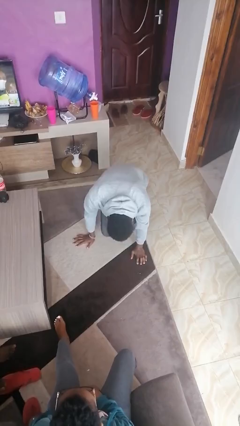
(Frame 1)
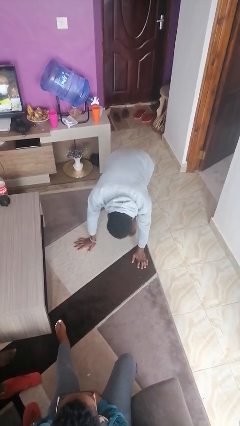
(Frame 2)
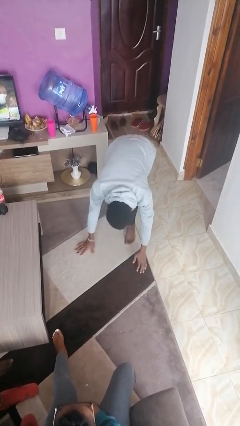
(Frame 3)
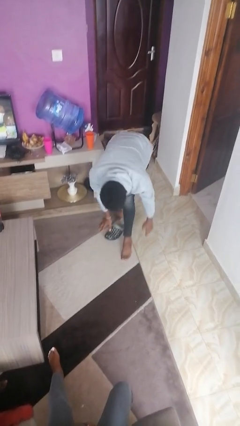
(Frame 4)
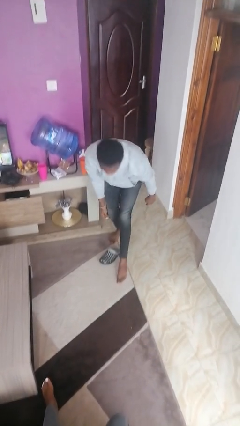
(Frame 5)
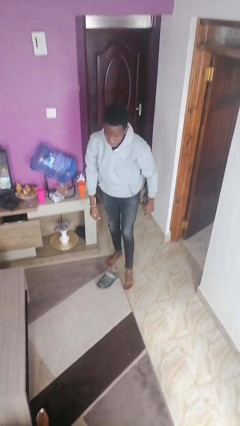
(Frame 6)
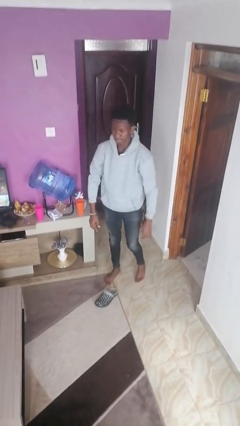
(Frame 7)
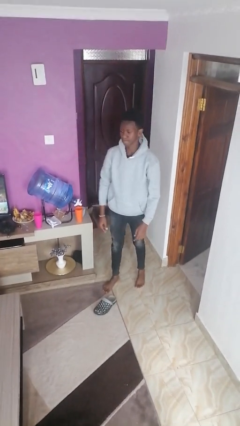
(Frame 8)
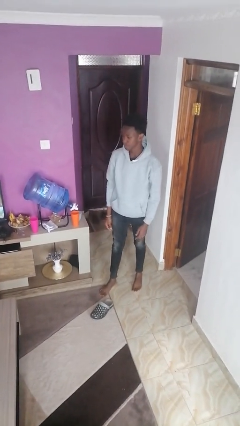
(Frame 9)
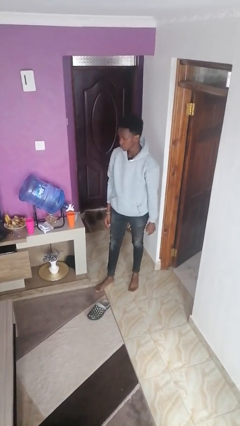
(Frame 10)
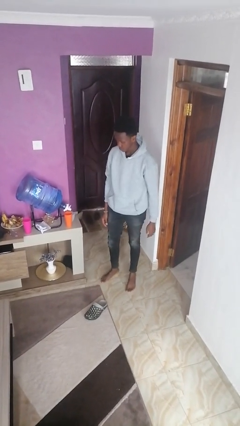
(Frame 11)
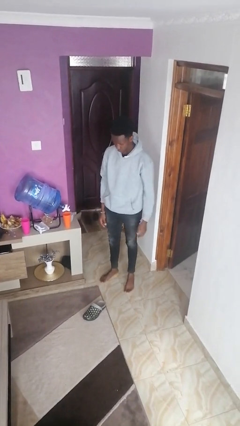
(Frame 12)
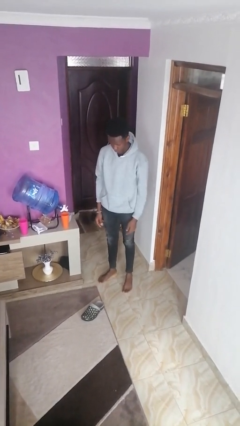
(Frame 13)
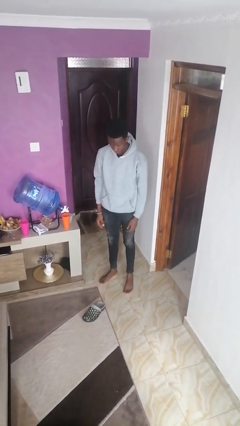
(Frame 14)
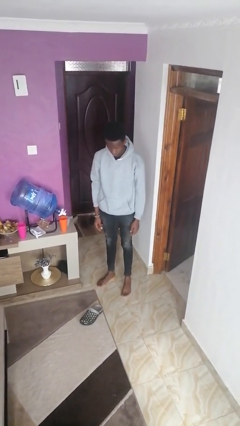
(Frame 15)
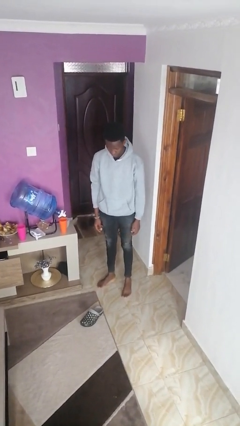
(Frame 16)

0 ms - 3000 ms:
person stands up from floor

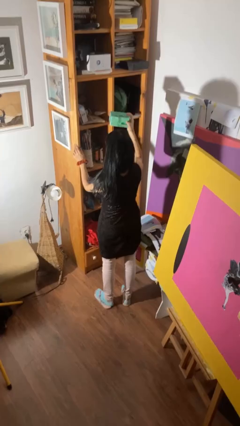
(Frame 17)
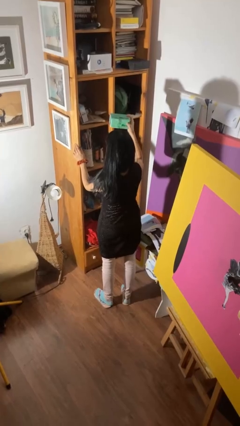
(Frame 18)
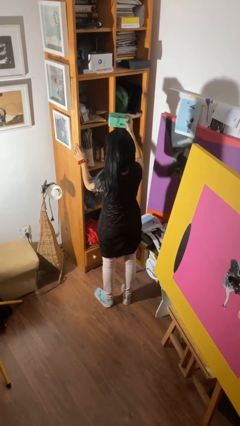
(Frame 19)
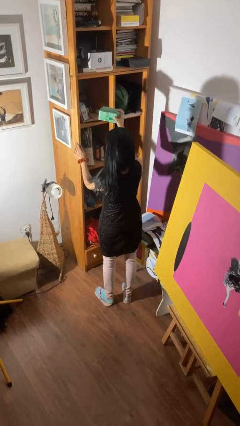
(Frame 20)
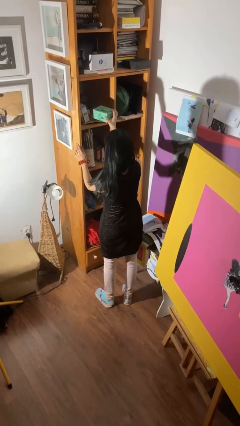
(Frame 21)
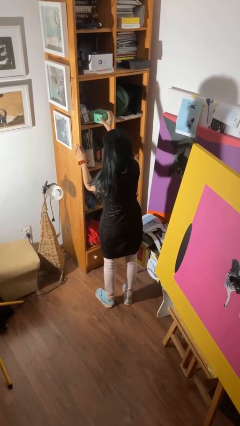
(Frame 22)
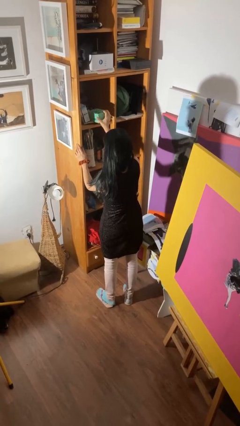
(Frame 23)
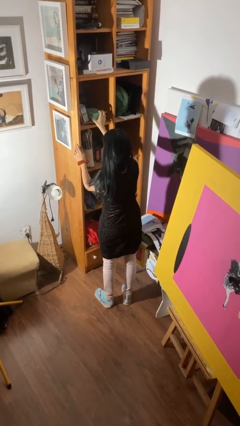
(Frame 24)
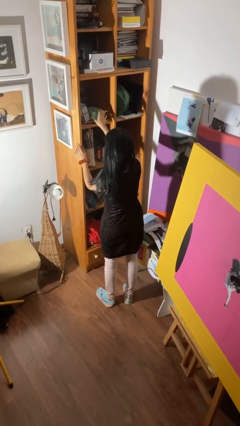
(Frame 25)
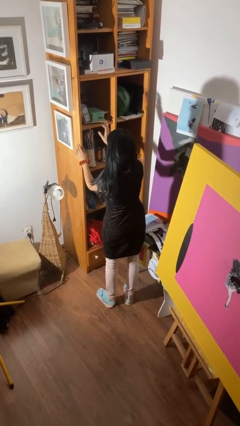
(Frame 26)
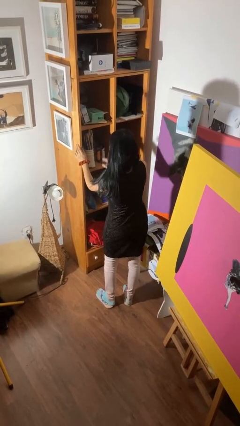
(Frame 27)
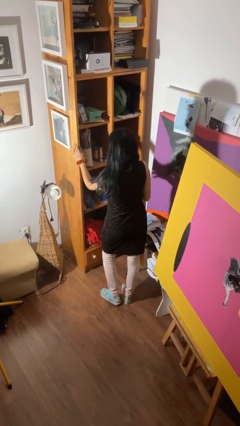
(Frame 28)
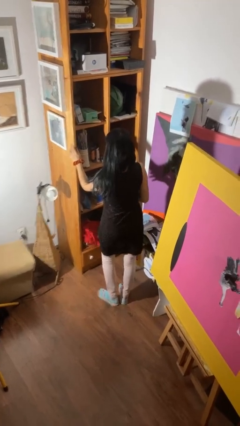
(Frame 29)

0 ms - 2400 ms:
person puts down object on shelf

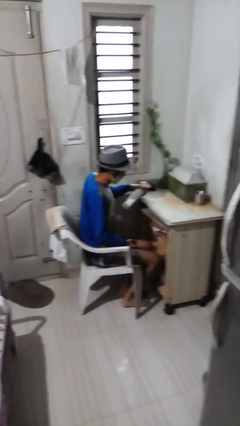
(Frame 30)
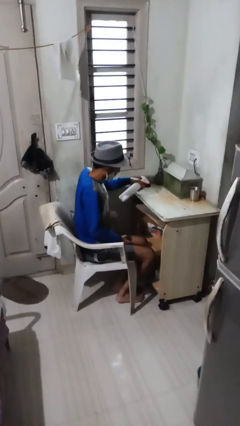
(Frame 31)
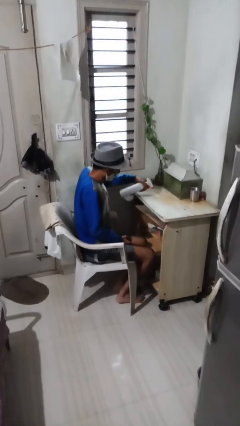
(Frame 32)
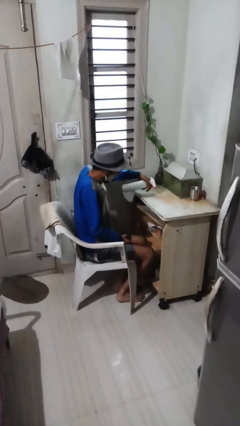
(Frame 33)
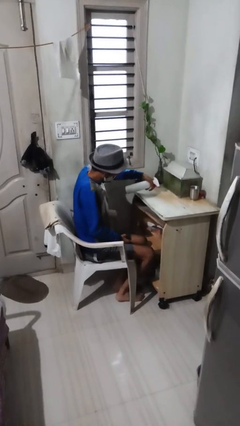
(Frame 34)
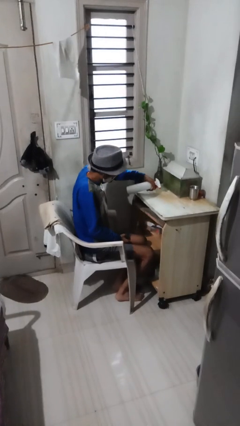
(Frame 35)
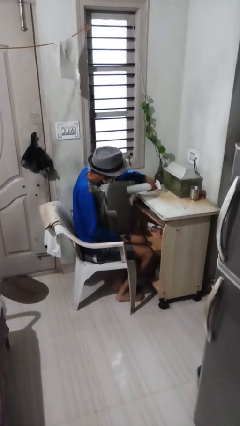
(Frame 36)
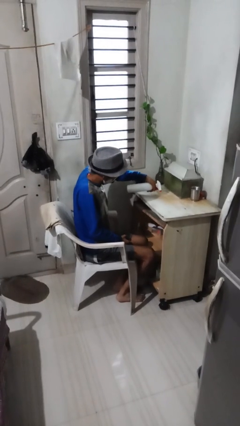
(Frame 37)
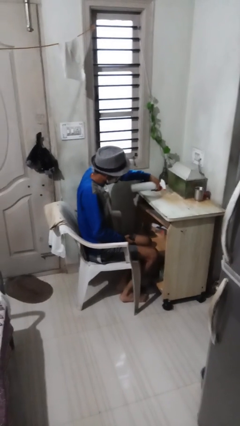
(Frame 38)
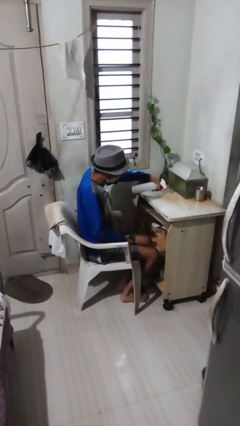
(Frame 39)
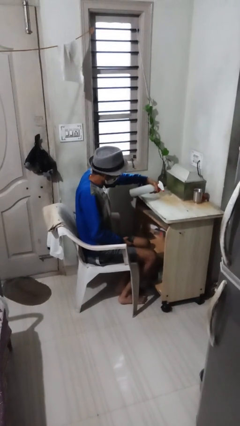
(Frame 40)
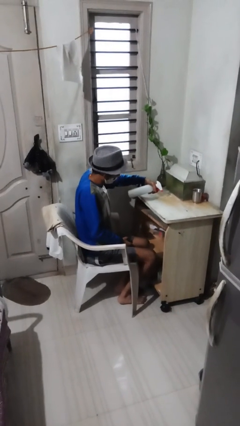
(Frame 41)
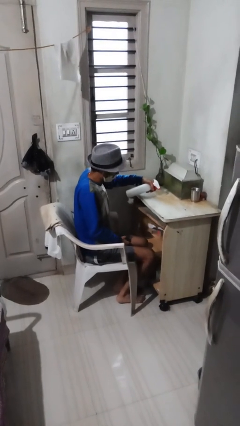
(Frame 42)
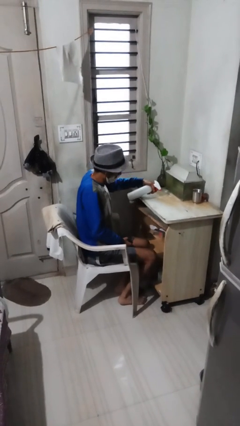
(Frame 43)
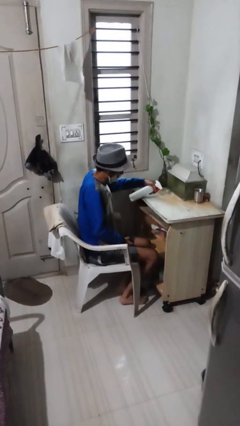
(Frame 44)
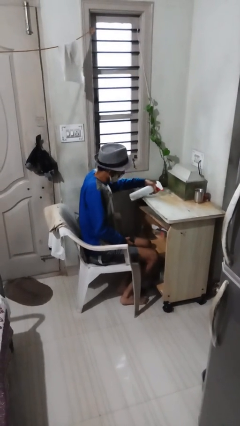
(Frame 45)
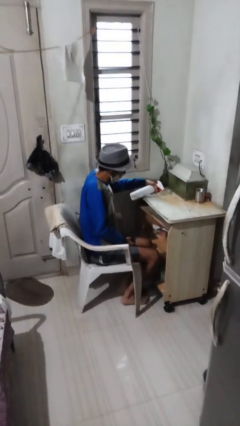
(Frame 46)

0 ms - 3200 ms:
person sprays from bottle

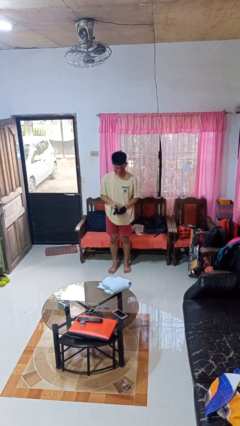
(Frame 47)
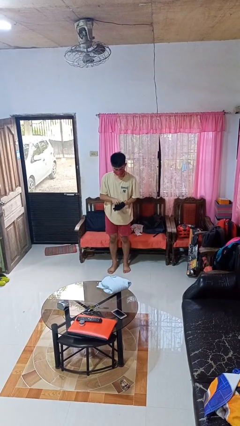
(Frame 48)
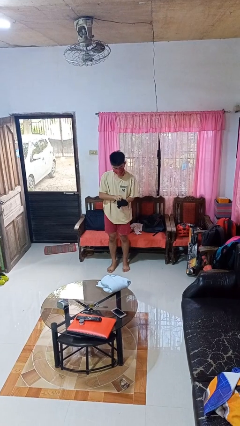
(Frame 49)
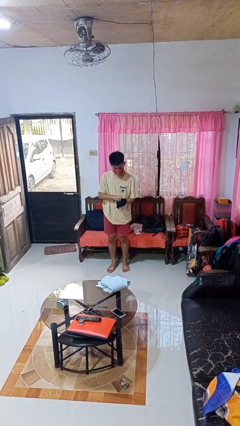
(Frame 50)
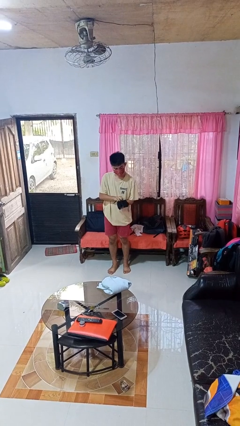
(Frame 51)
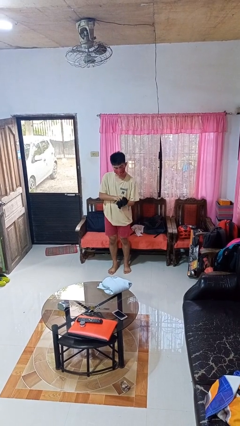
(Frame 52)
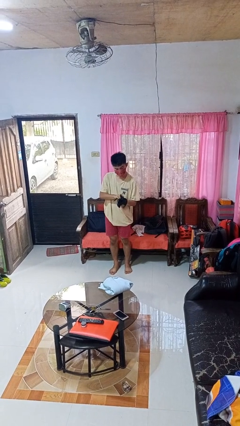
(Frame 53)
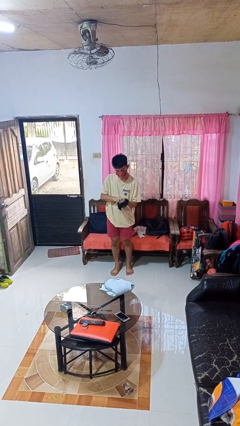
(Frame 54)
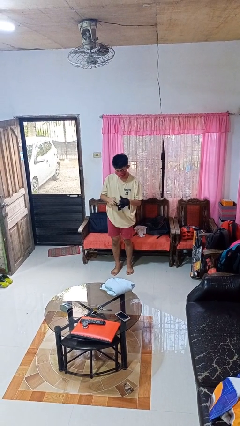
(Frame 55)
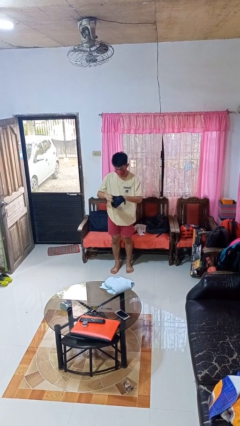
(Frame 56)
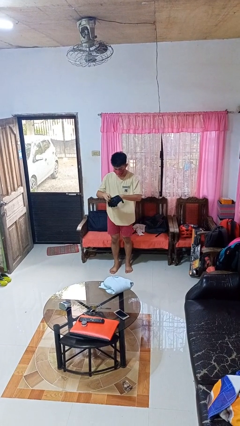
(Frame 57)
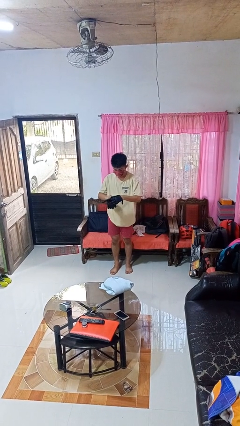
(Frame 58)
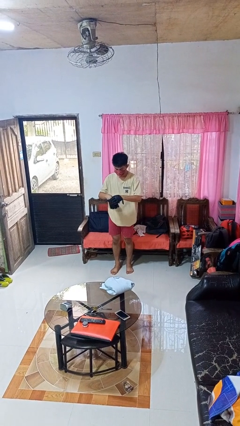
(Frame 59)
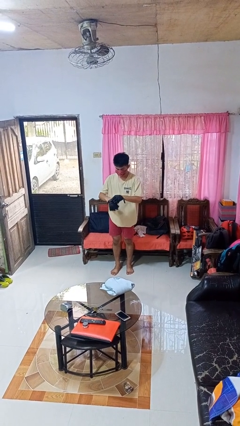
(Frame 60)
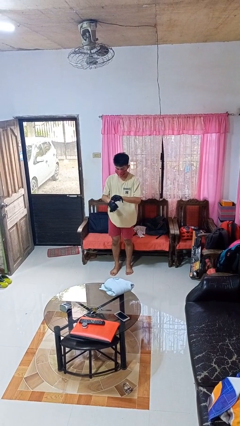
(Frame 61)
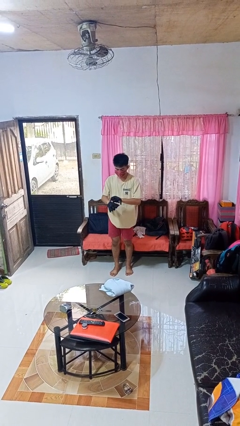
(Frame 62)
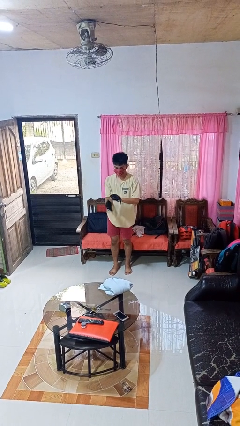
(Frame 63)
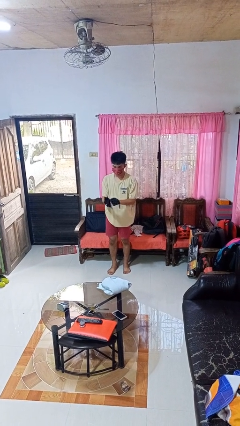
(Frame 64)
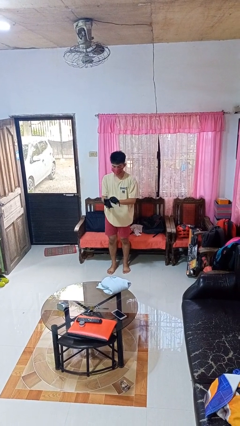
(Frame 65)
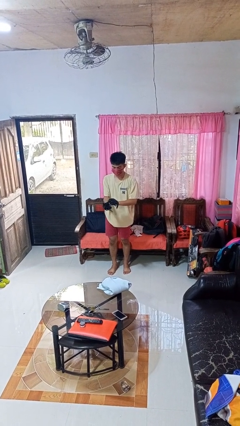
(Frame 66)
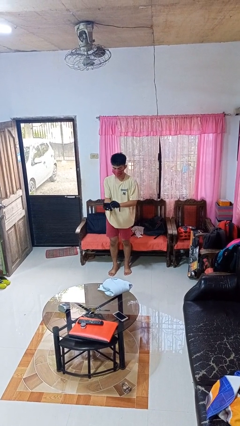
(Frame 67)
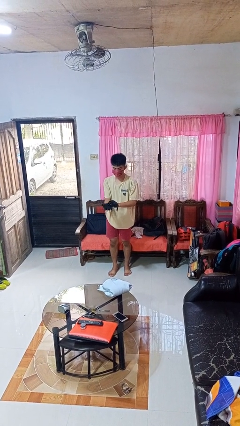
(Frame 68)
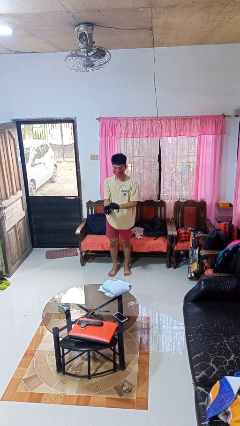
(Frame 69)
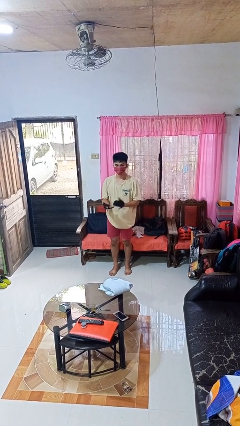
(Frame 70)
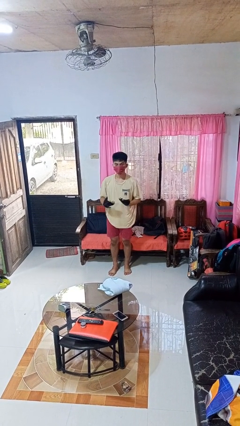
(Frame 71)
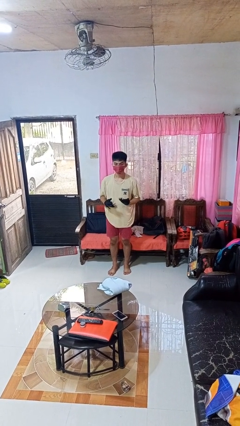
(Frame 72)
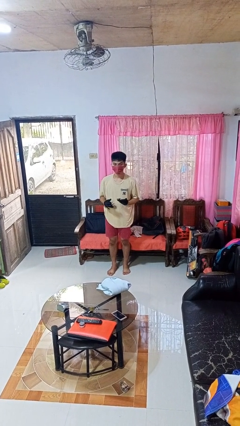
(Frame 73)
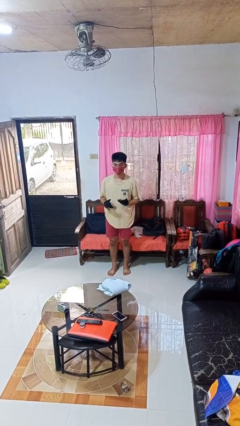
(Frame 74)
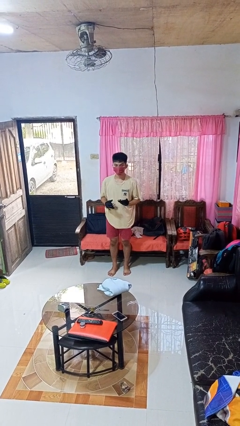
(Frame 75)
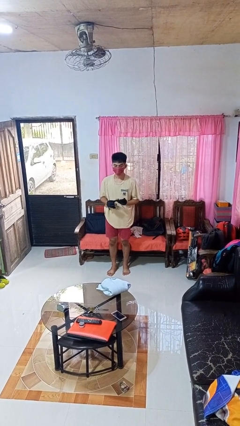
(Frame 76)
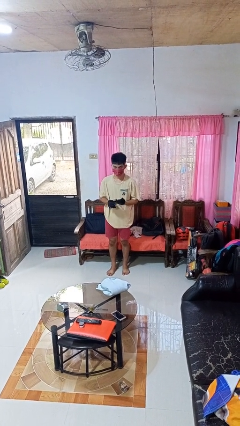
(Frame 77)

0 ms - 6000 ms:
person puts on gloves

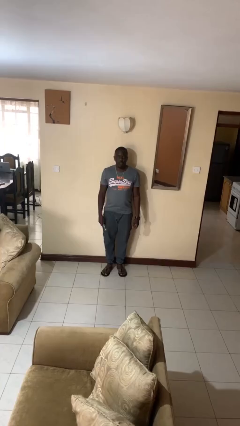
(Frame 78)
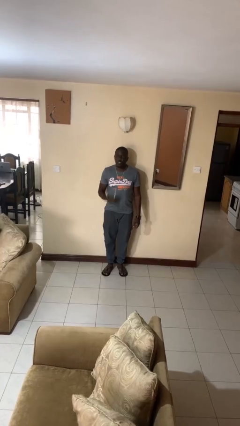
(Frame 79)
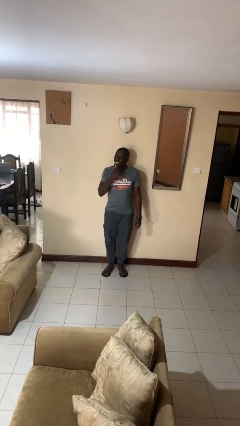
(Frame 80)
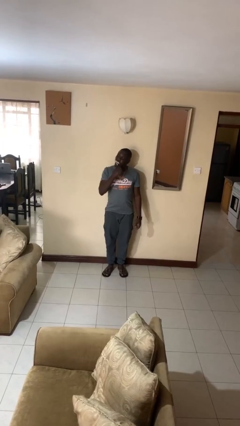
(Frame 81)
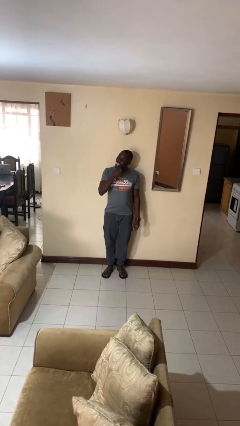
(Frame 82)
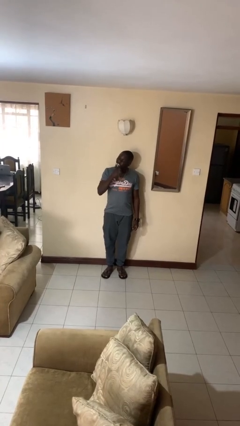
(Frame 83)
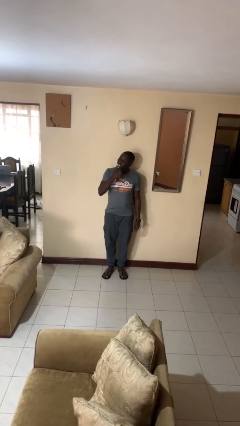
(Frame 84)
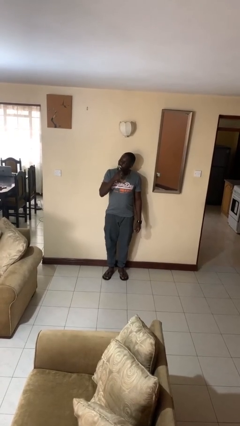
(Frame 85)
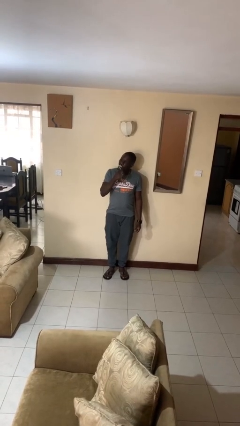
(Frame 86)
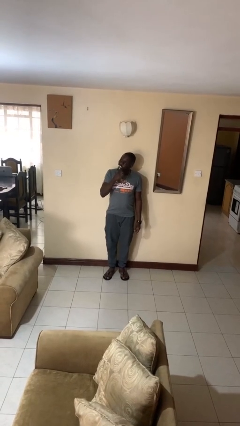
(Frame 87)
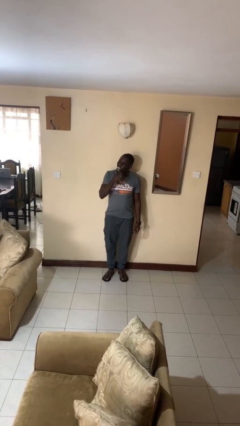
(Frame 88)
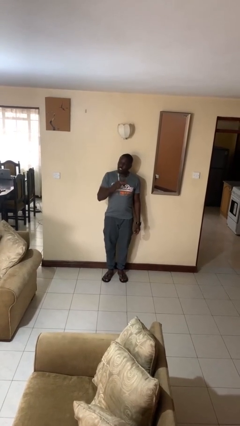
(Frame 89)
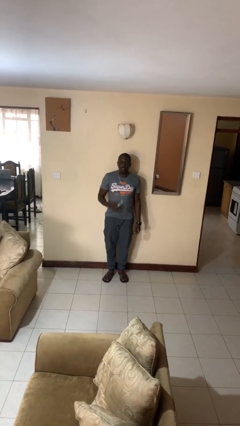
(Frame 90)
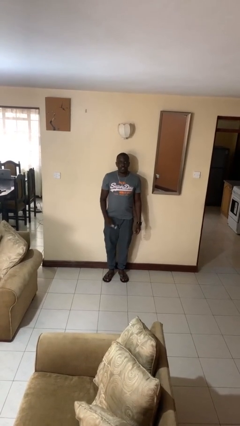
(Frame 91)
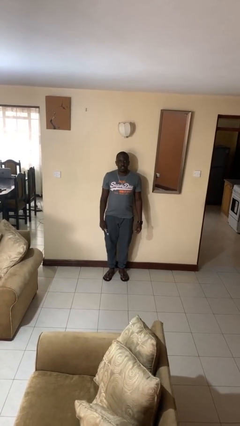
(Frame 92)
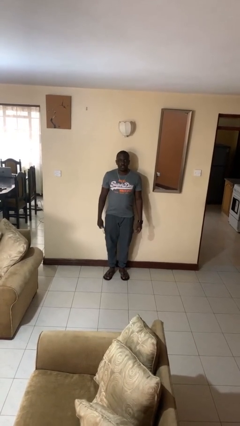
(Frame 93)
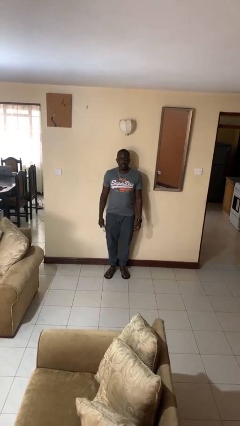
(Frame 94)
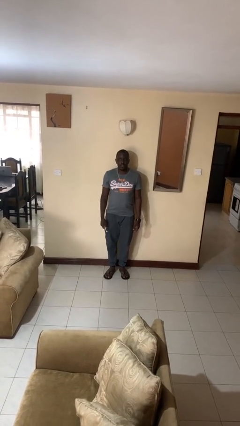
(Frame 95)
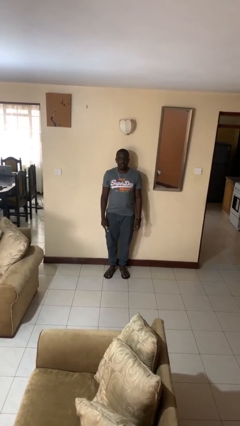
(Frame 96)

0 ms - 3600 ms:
person brushes teeth
